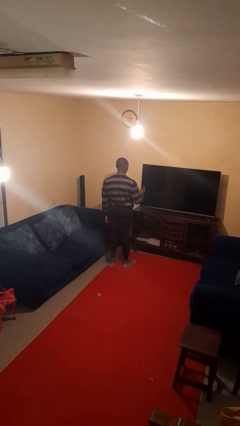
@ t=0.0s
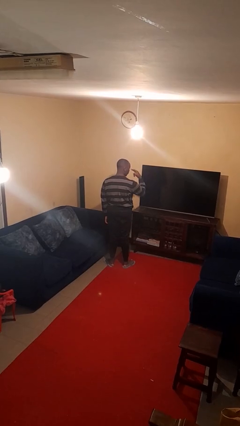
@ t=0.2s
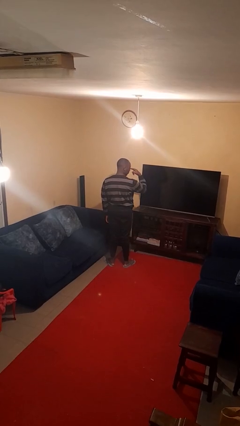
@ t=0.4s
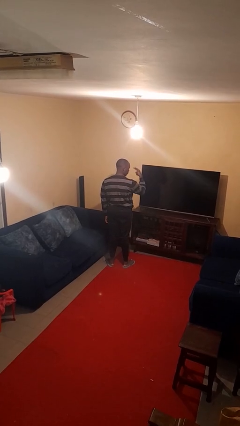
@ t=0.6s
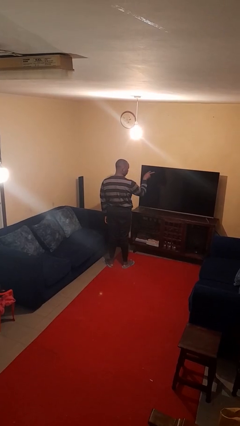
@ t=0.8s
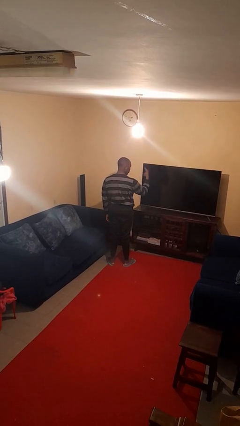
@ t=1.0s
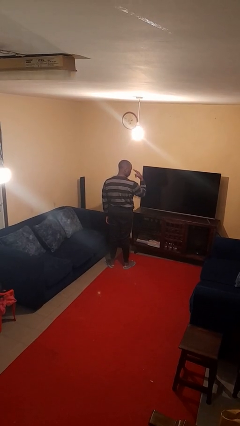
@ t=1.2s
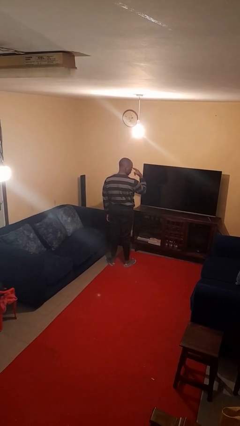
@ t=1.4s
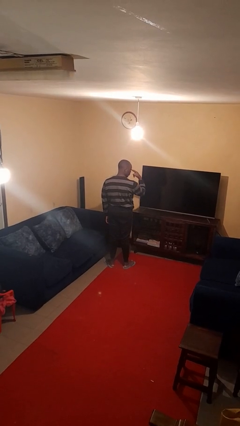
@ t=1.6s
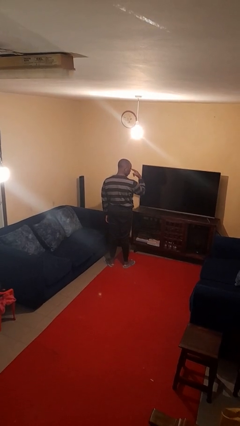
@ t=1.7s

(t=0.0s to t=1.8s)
person gestures watch closely

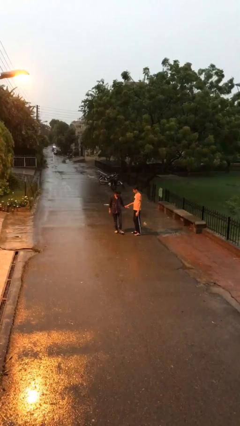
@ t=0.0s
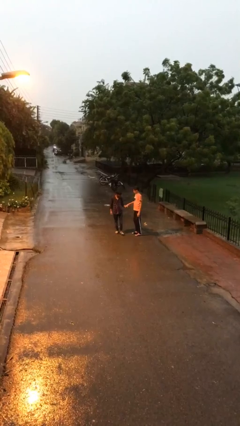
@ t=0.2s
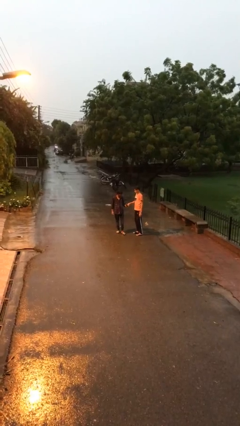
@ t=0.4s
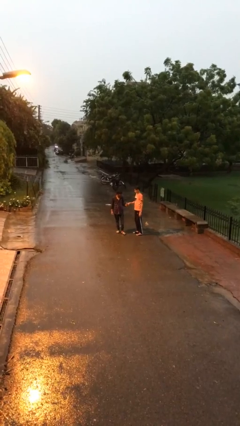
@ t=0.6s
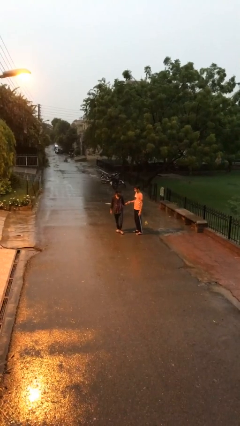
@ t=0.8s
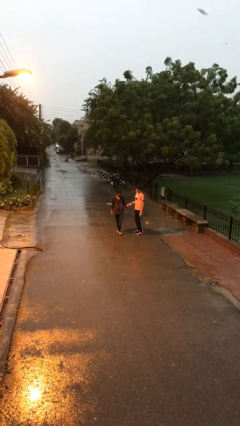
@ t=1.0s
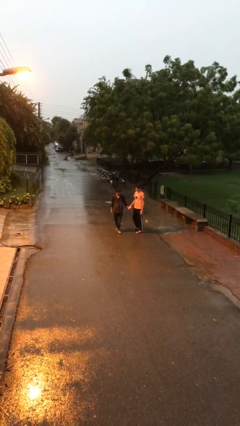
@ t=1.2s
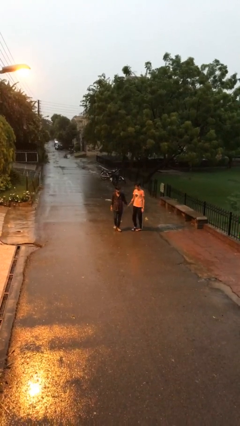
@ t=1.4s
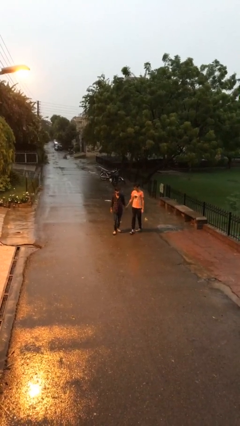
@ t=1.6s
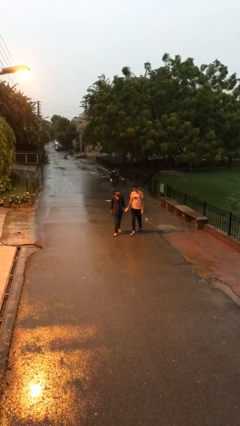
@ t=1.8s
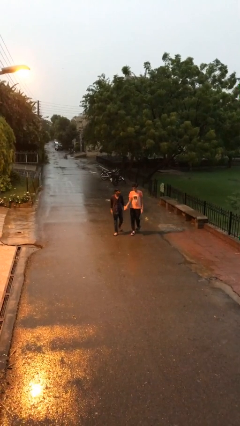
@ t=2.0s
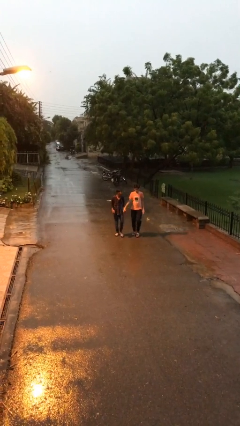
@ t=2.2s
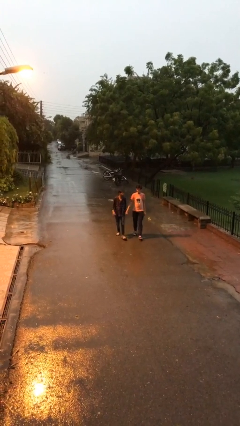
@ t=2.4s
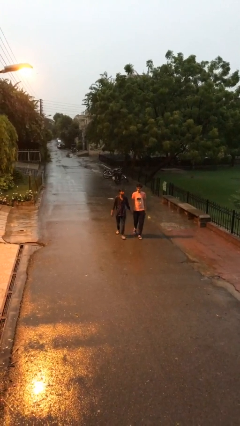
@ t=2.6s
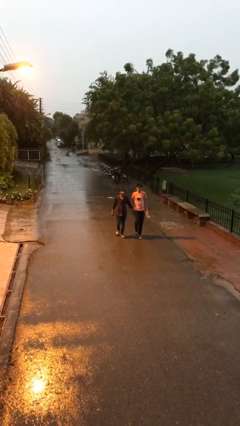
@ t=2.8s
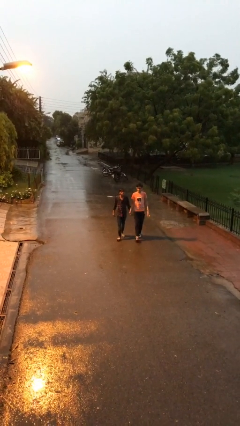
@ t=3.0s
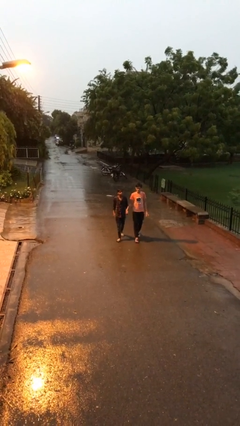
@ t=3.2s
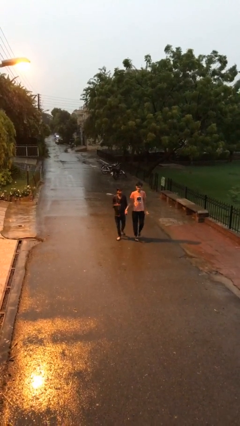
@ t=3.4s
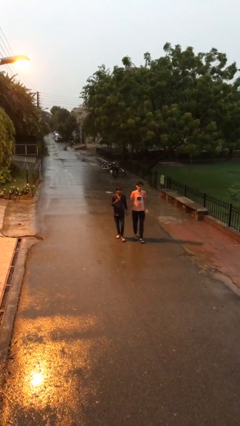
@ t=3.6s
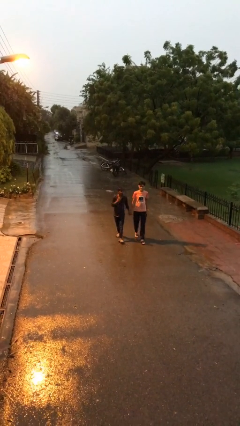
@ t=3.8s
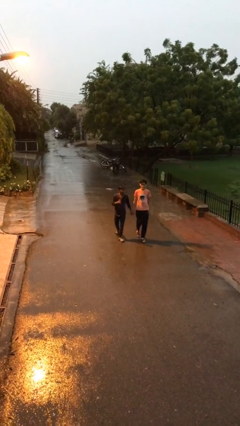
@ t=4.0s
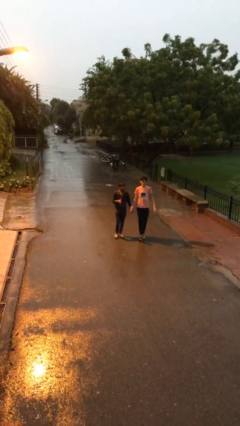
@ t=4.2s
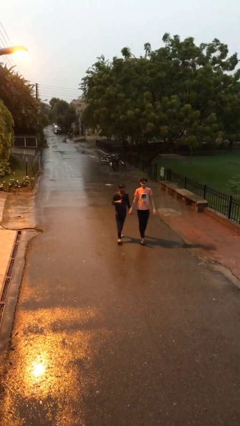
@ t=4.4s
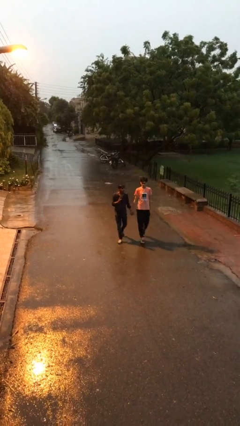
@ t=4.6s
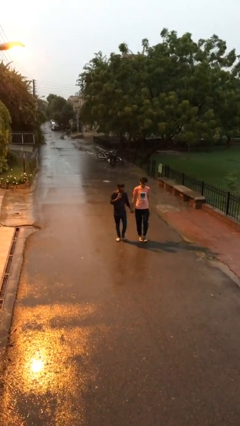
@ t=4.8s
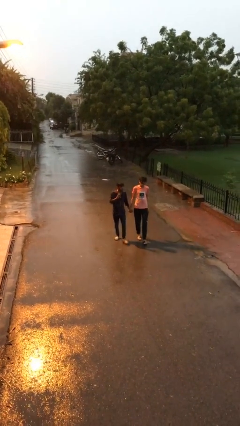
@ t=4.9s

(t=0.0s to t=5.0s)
person holds hand

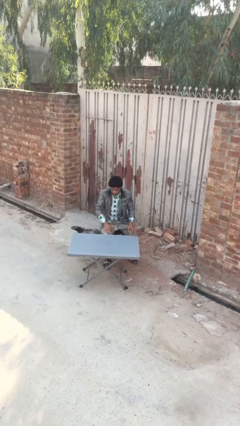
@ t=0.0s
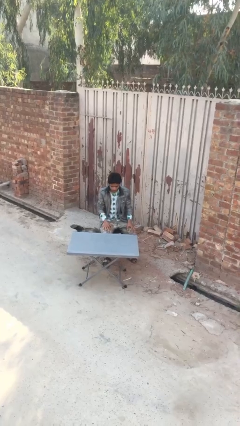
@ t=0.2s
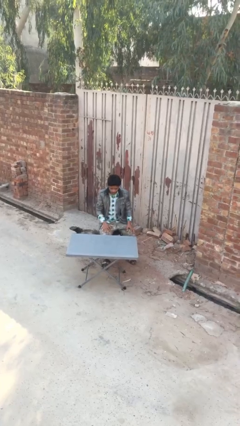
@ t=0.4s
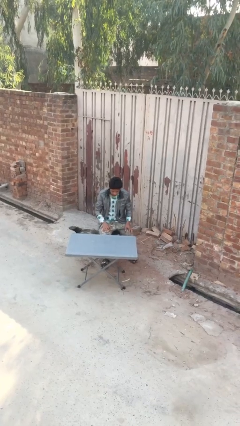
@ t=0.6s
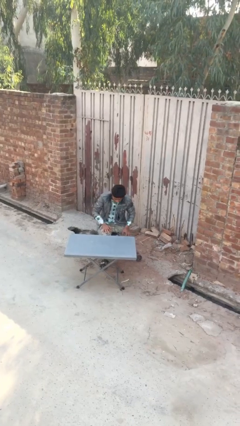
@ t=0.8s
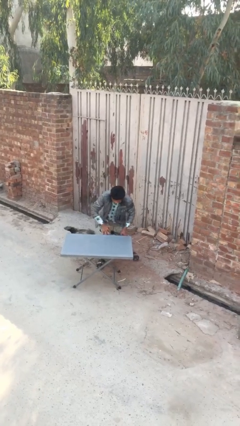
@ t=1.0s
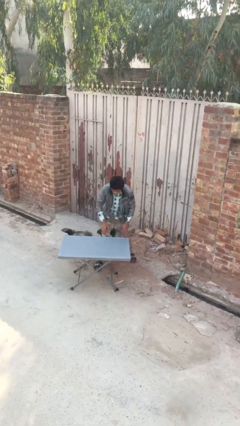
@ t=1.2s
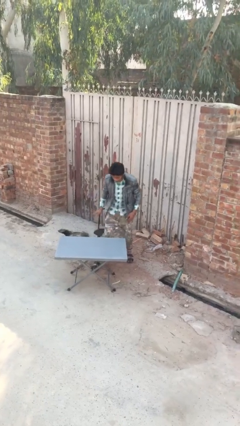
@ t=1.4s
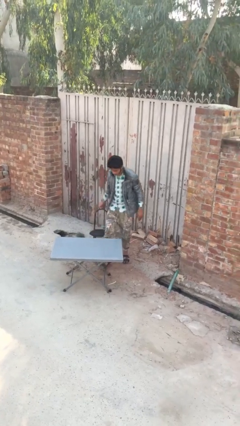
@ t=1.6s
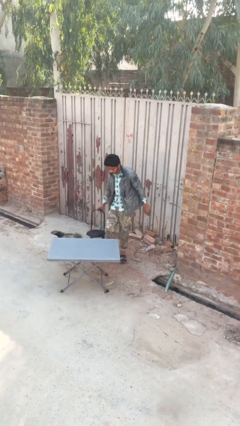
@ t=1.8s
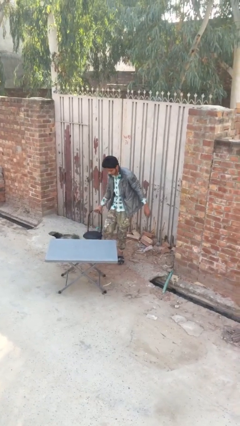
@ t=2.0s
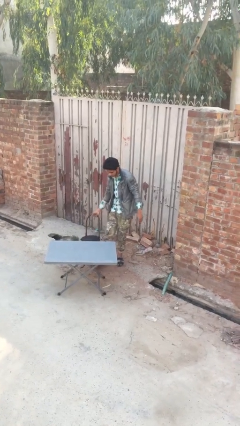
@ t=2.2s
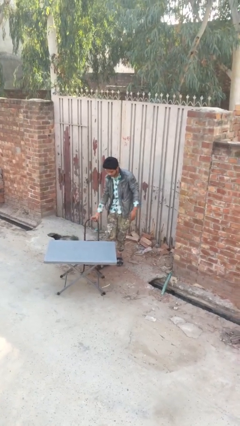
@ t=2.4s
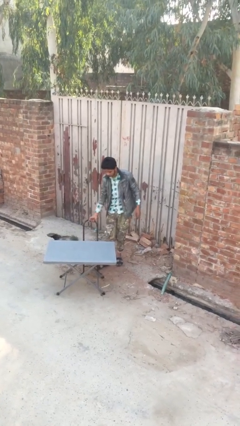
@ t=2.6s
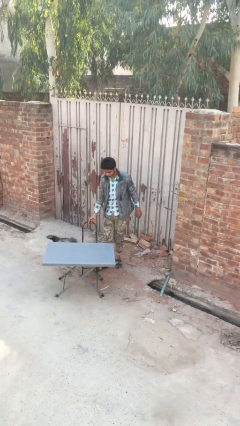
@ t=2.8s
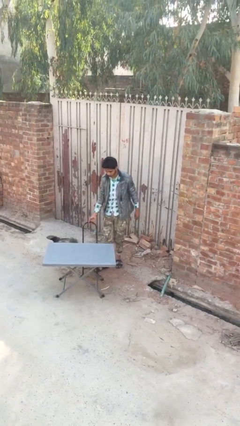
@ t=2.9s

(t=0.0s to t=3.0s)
person stands up

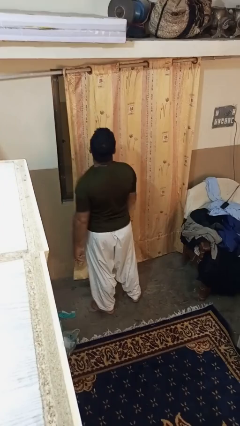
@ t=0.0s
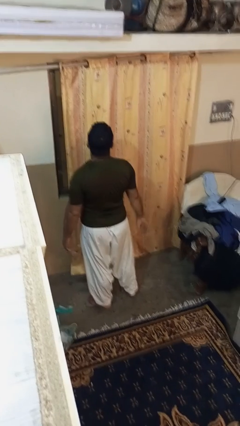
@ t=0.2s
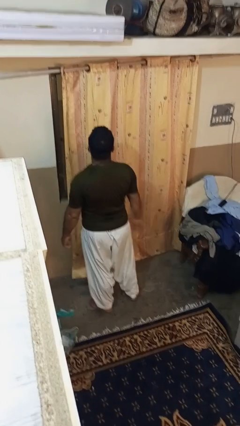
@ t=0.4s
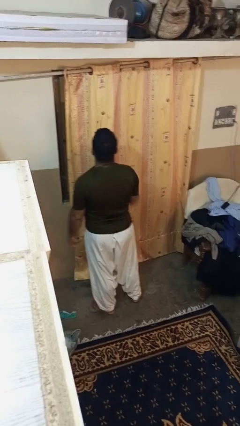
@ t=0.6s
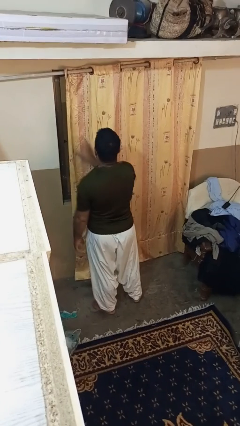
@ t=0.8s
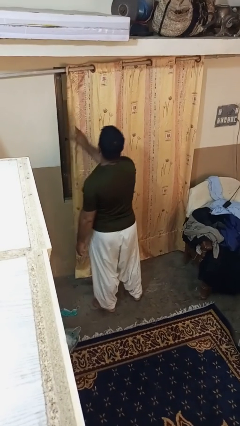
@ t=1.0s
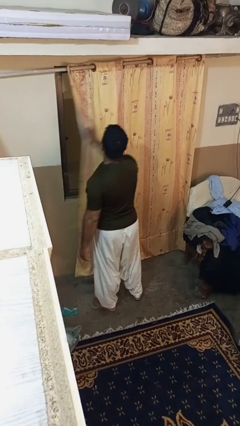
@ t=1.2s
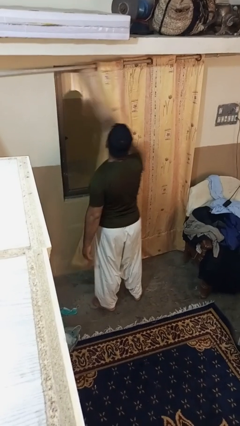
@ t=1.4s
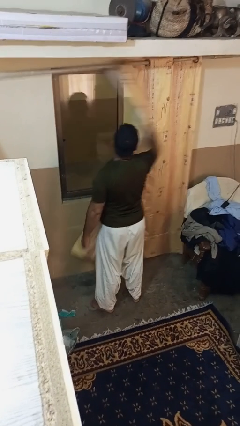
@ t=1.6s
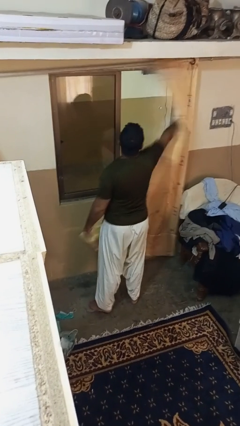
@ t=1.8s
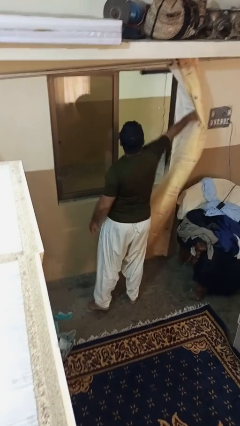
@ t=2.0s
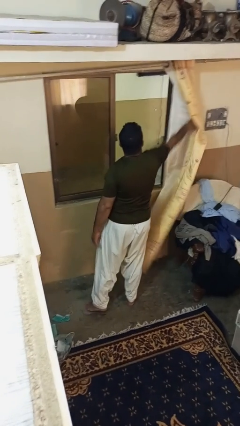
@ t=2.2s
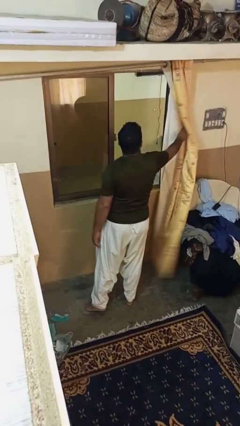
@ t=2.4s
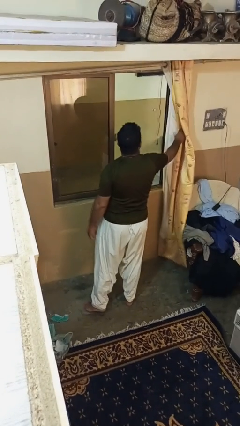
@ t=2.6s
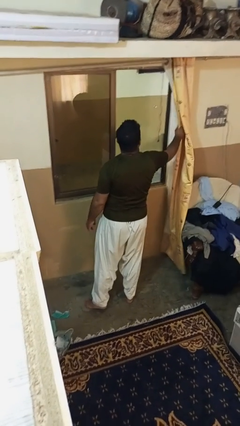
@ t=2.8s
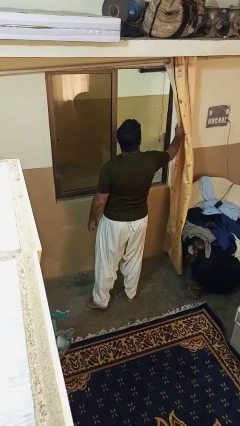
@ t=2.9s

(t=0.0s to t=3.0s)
person opens curtains

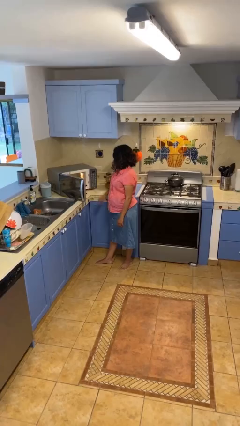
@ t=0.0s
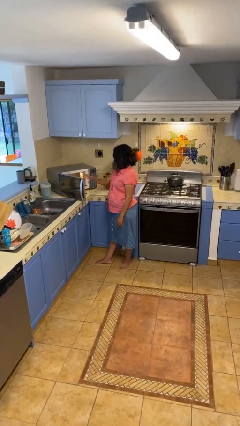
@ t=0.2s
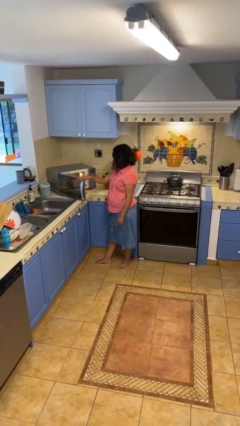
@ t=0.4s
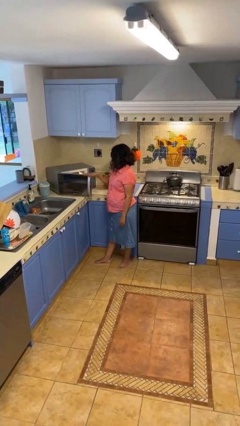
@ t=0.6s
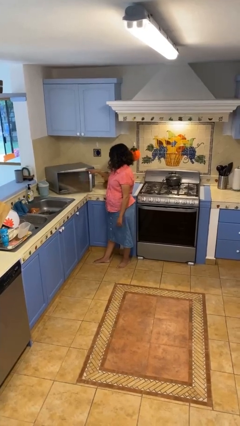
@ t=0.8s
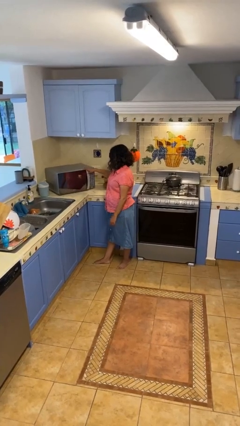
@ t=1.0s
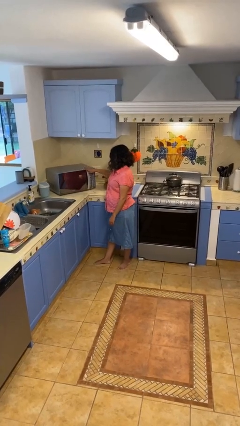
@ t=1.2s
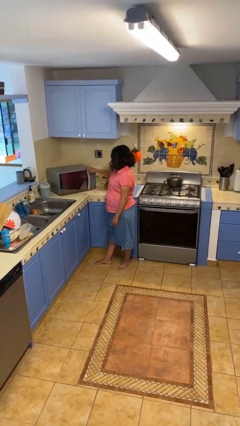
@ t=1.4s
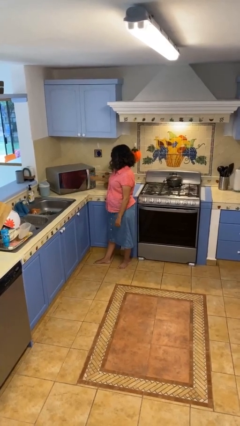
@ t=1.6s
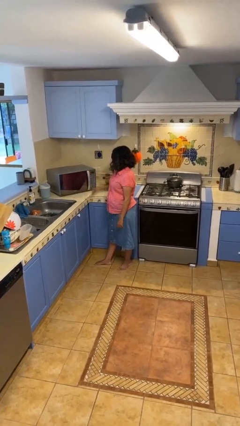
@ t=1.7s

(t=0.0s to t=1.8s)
person closes microwave

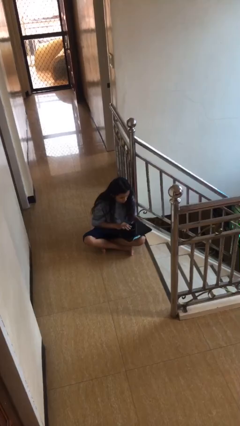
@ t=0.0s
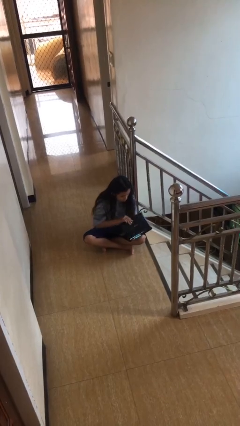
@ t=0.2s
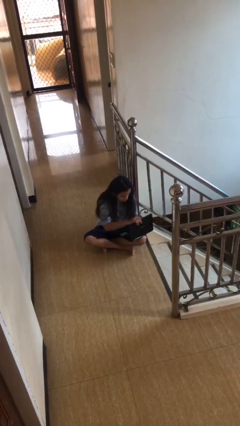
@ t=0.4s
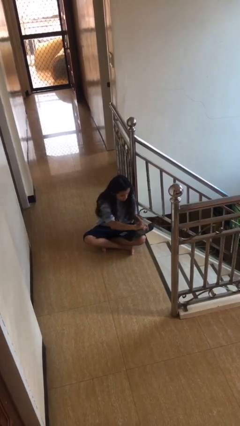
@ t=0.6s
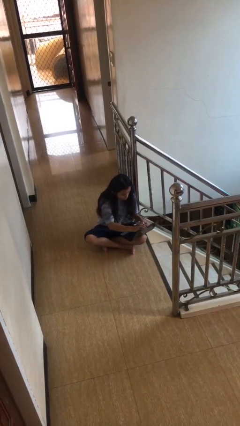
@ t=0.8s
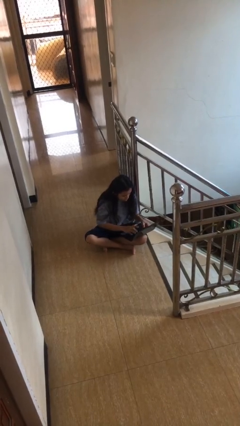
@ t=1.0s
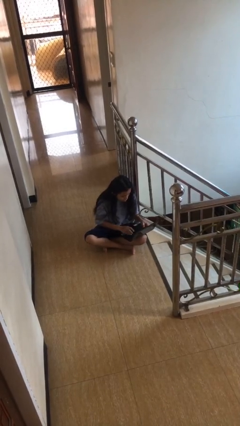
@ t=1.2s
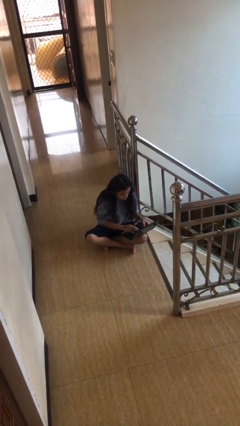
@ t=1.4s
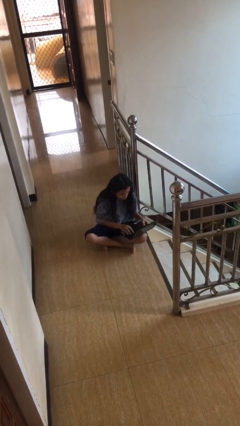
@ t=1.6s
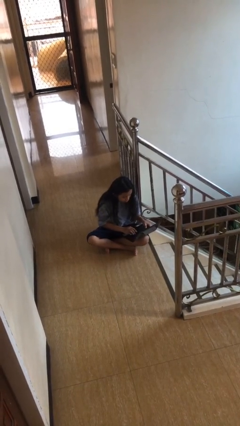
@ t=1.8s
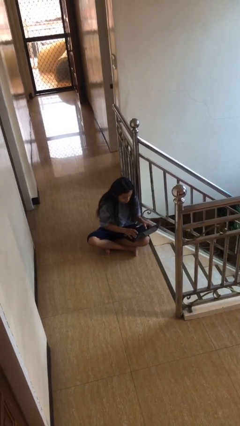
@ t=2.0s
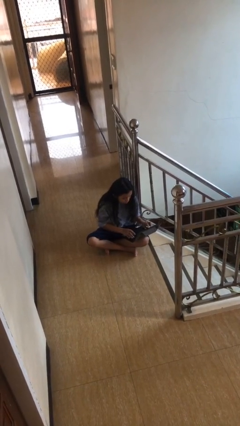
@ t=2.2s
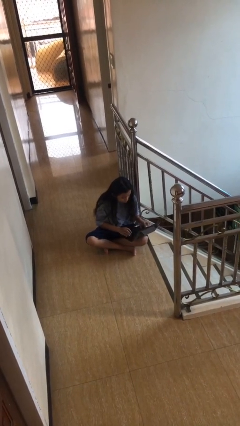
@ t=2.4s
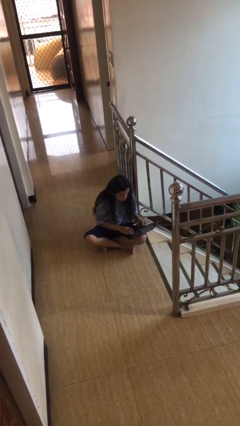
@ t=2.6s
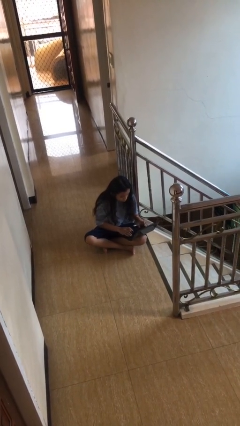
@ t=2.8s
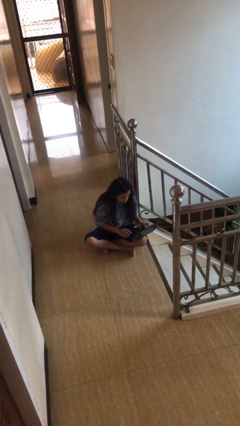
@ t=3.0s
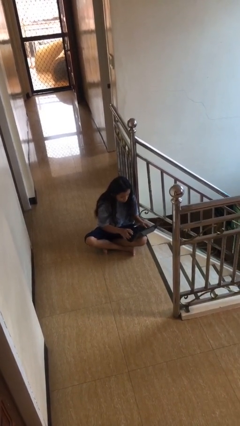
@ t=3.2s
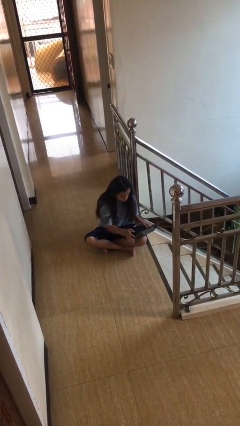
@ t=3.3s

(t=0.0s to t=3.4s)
person interacts with laptop
